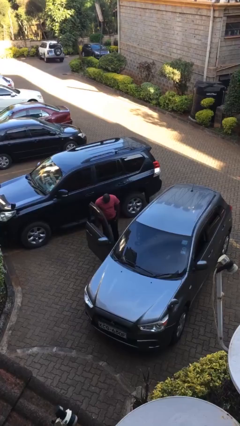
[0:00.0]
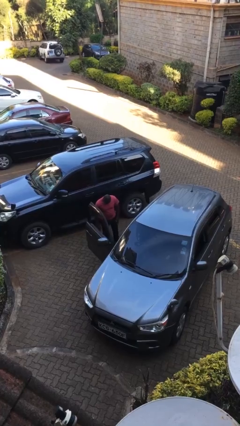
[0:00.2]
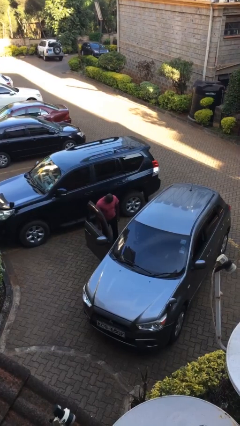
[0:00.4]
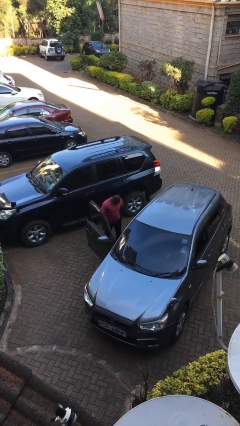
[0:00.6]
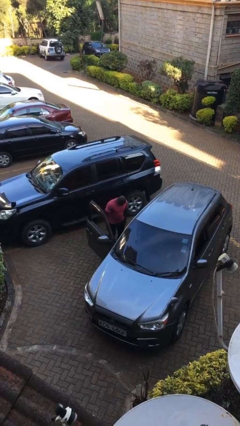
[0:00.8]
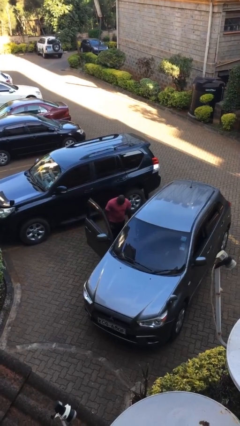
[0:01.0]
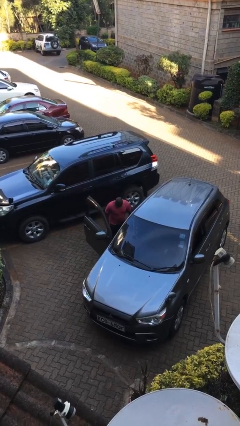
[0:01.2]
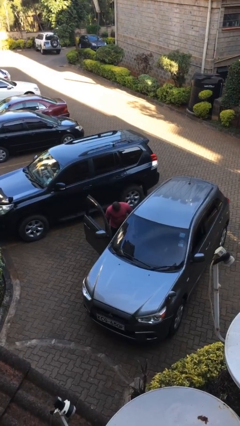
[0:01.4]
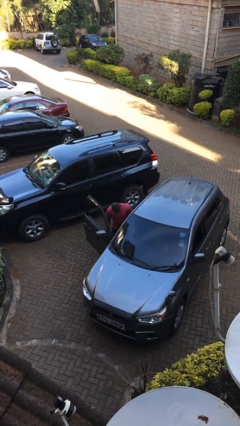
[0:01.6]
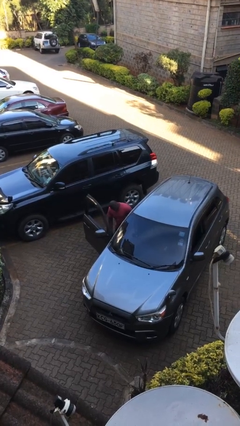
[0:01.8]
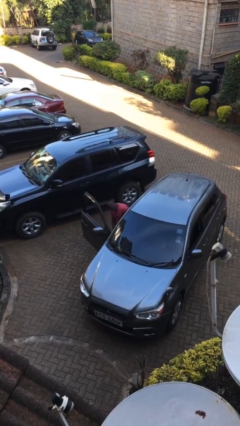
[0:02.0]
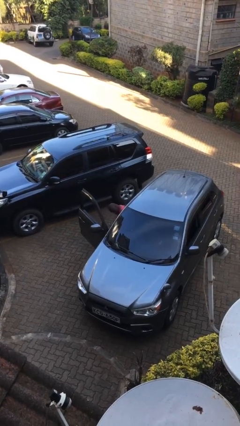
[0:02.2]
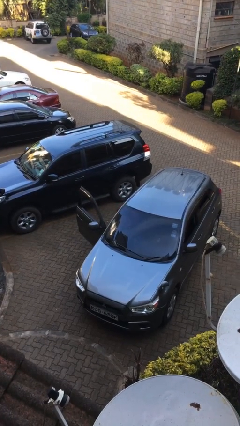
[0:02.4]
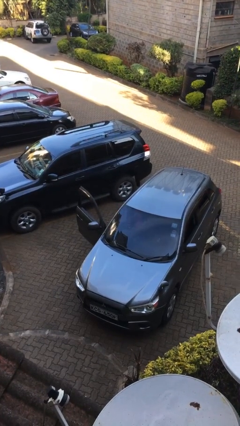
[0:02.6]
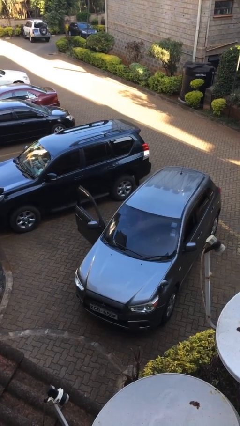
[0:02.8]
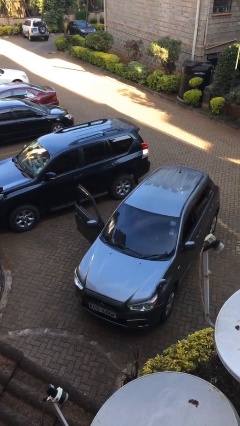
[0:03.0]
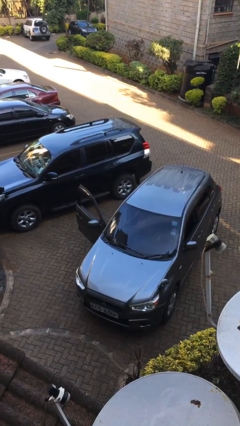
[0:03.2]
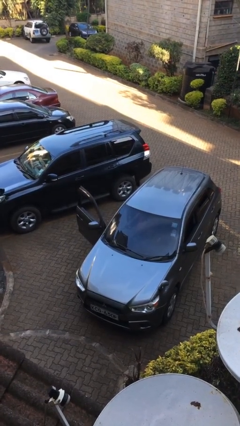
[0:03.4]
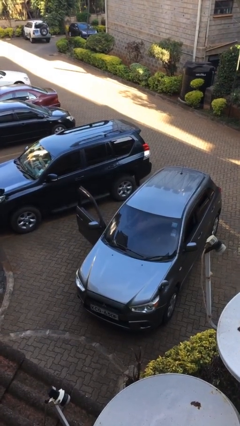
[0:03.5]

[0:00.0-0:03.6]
person enters car

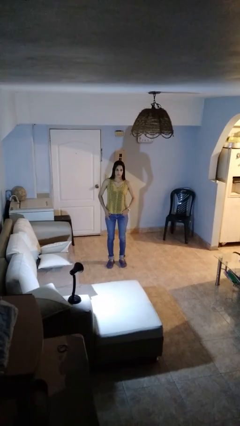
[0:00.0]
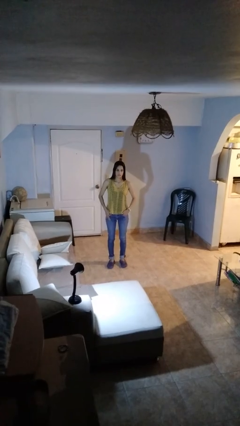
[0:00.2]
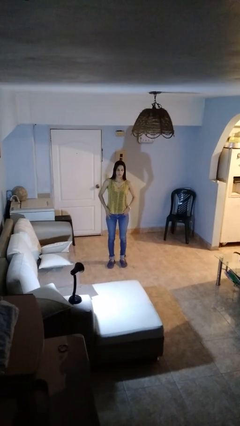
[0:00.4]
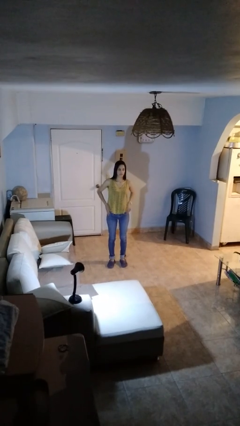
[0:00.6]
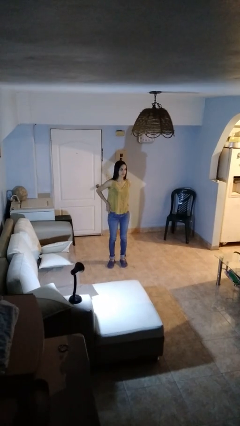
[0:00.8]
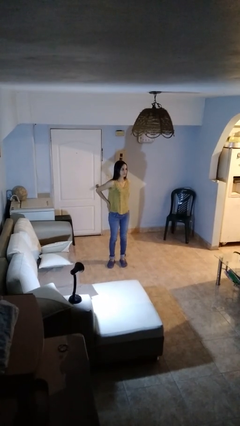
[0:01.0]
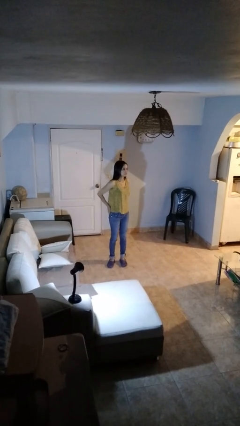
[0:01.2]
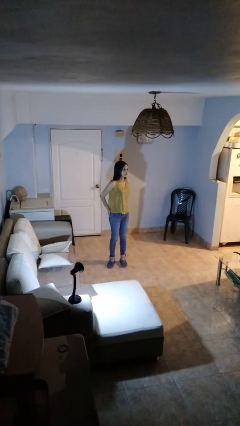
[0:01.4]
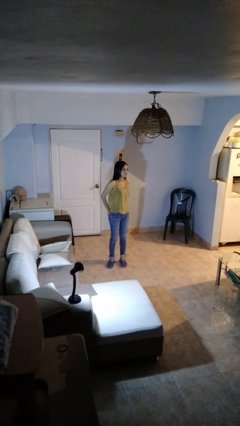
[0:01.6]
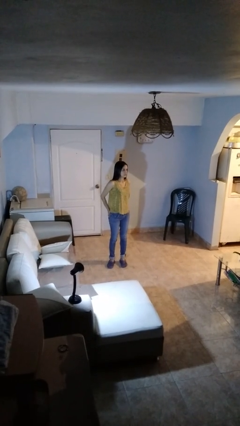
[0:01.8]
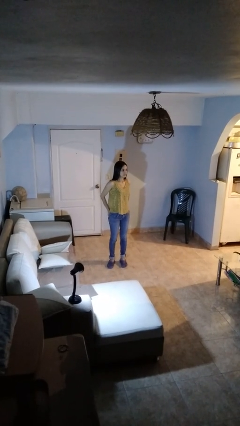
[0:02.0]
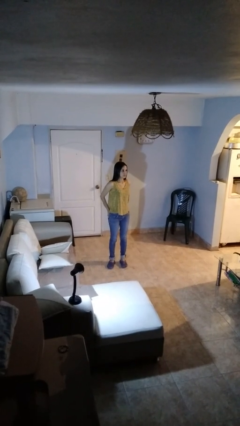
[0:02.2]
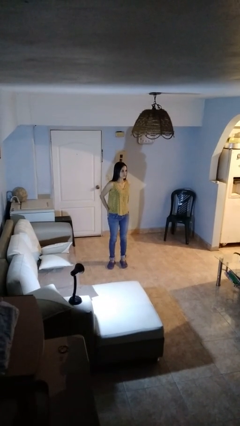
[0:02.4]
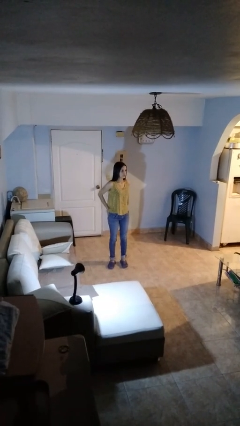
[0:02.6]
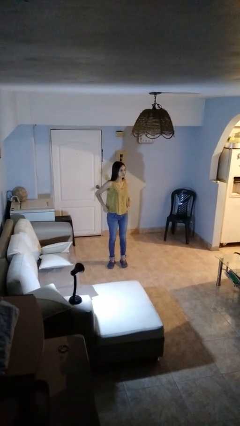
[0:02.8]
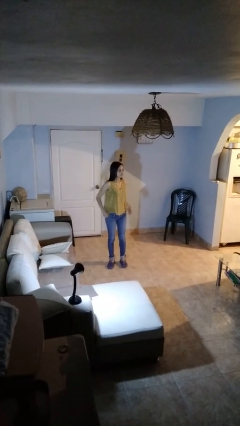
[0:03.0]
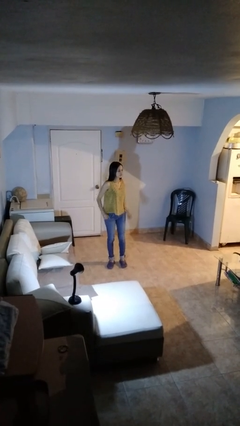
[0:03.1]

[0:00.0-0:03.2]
person puts hands in back pockets

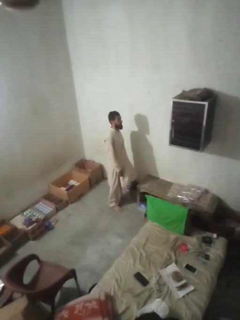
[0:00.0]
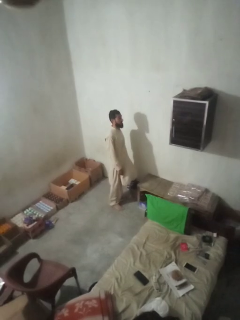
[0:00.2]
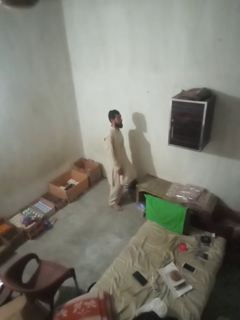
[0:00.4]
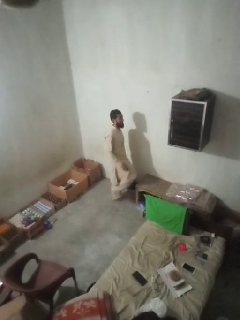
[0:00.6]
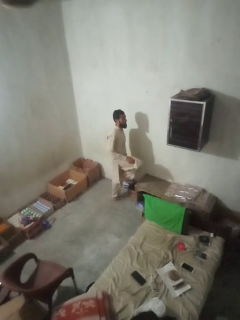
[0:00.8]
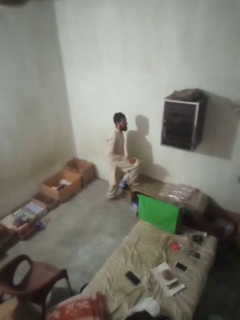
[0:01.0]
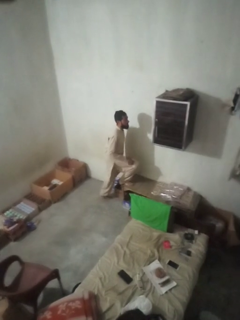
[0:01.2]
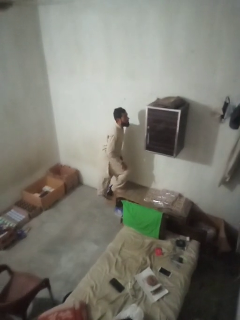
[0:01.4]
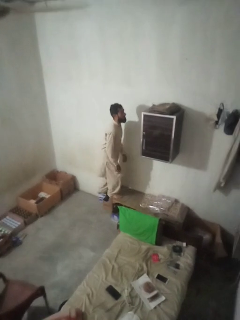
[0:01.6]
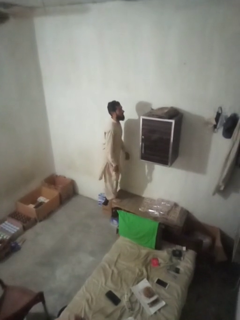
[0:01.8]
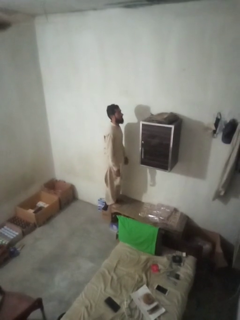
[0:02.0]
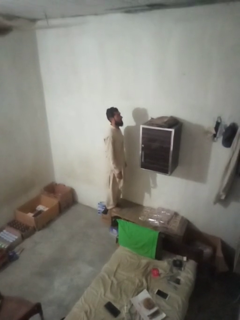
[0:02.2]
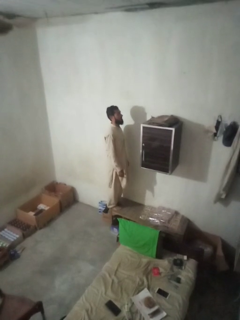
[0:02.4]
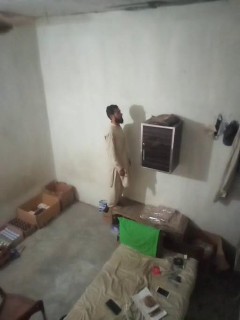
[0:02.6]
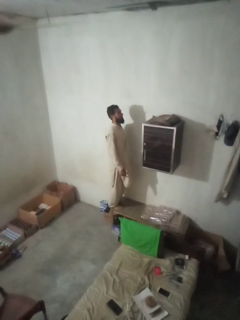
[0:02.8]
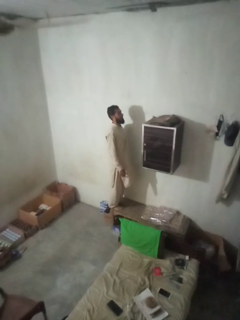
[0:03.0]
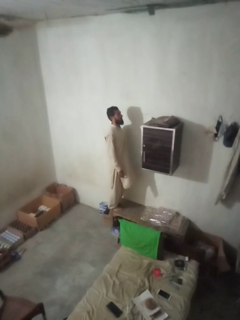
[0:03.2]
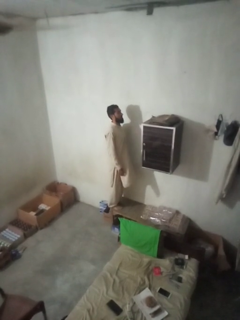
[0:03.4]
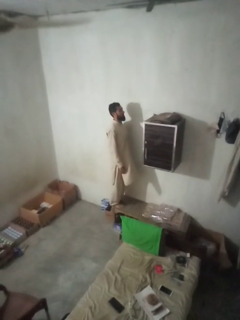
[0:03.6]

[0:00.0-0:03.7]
person climbs on table

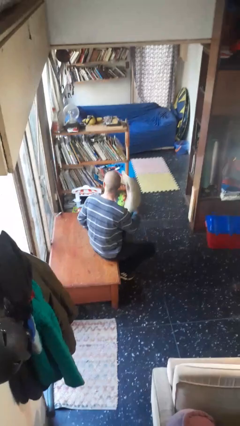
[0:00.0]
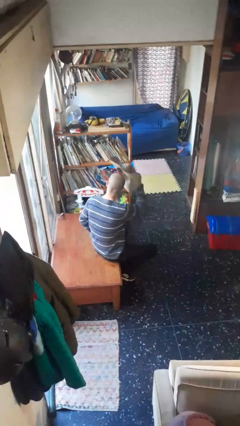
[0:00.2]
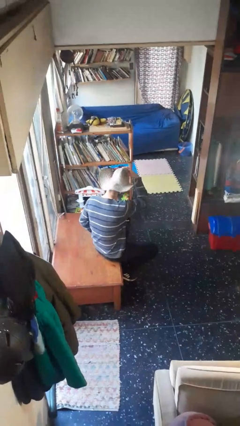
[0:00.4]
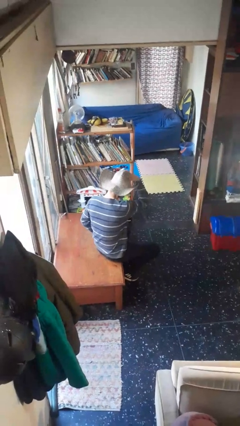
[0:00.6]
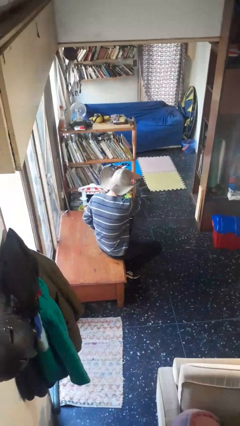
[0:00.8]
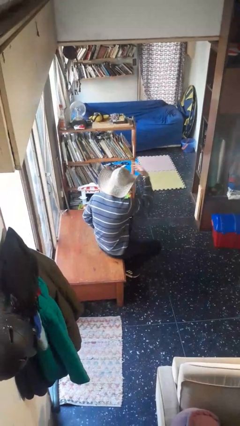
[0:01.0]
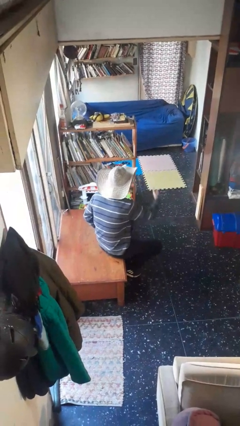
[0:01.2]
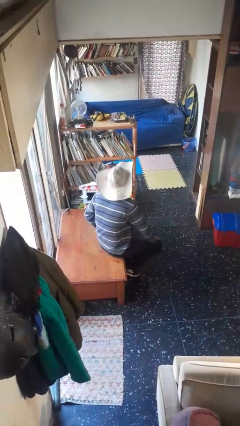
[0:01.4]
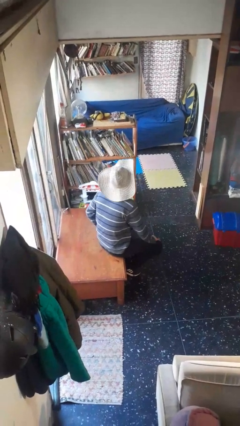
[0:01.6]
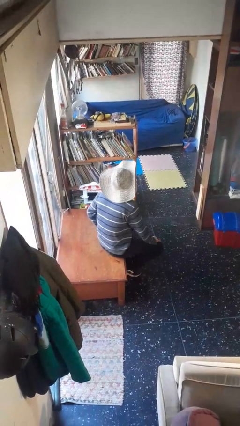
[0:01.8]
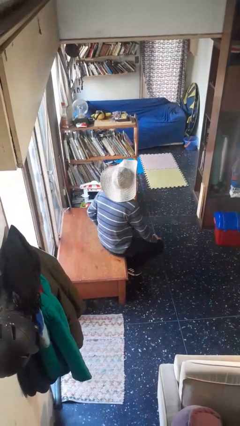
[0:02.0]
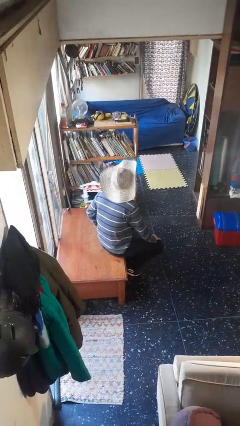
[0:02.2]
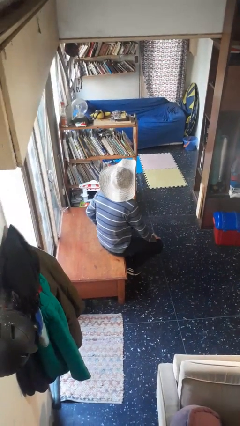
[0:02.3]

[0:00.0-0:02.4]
person puts on hat

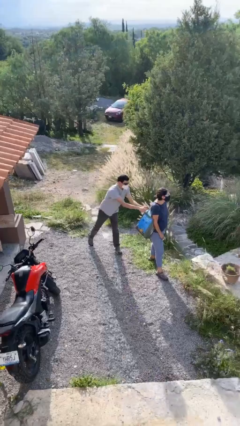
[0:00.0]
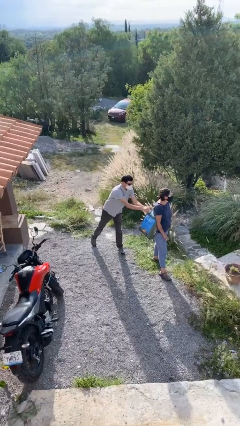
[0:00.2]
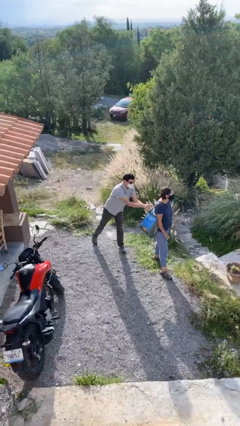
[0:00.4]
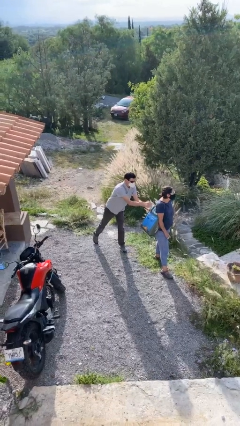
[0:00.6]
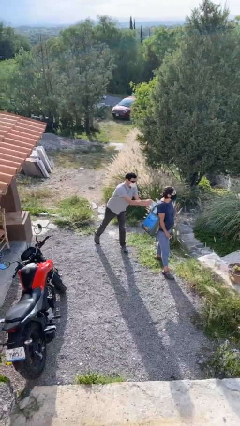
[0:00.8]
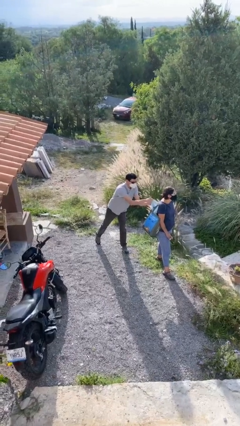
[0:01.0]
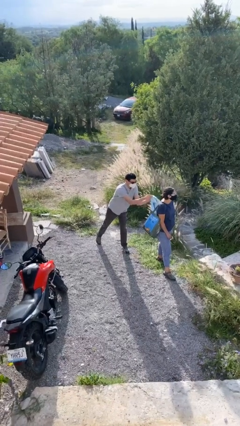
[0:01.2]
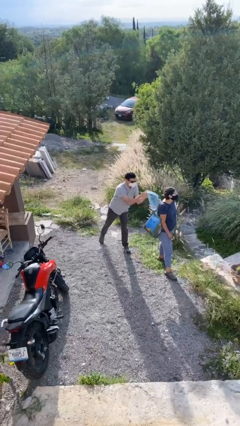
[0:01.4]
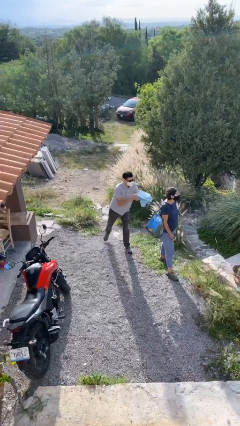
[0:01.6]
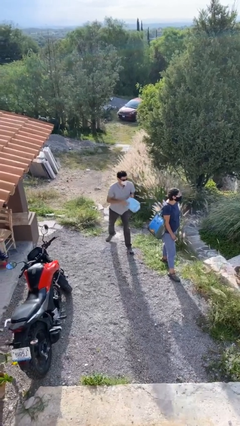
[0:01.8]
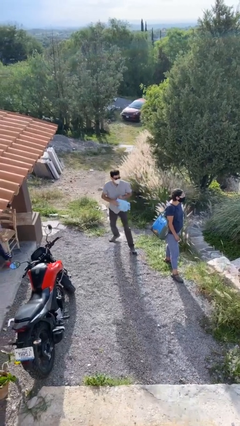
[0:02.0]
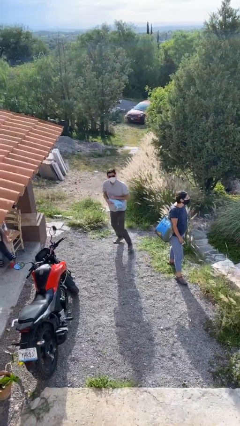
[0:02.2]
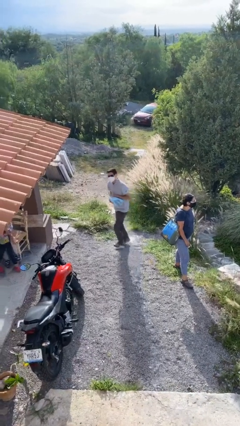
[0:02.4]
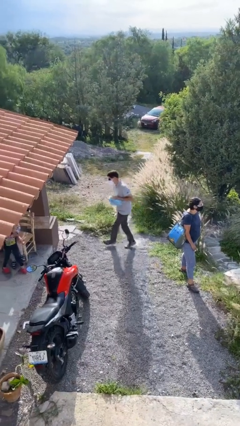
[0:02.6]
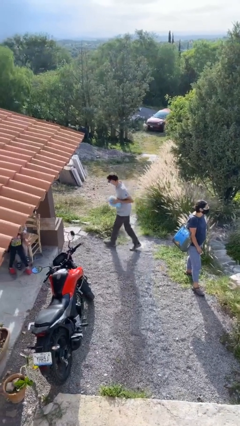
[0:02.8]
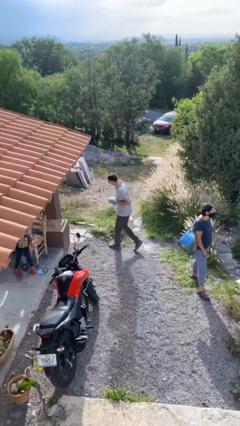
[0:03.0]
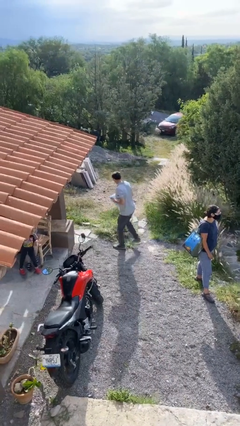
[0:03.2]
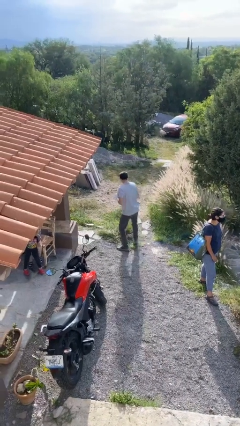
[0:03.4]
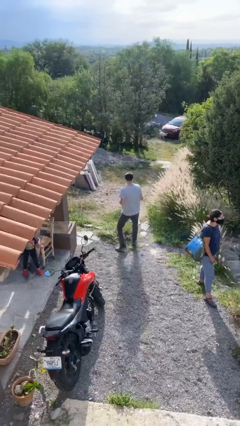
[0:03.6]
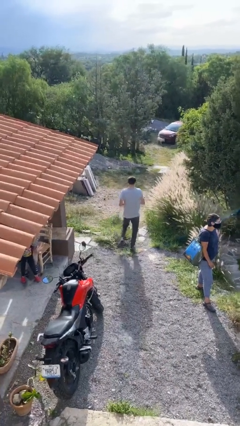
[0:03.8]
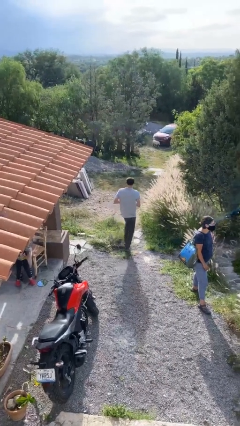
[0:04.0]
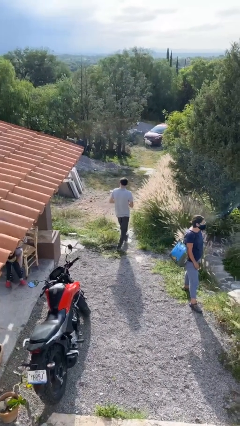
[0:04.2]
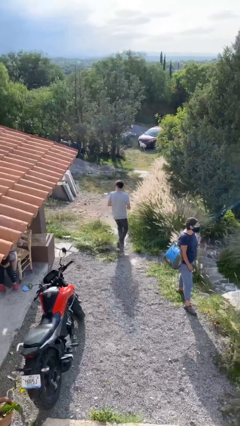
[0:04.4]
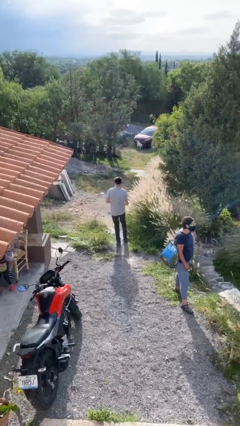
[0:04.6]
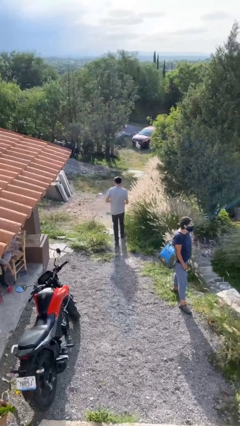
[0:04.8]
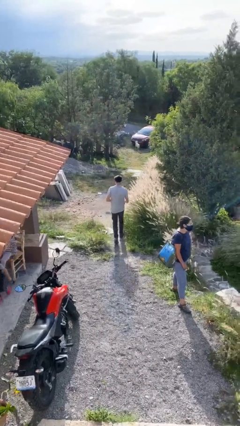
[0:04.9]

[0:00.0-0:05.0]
person steals object from person
